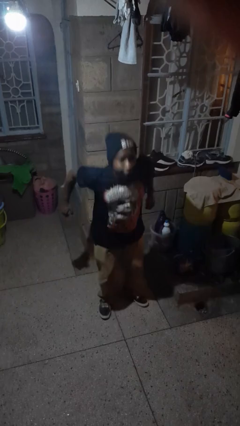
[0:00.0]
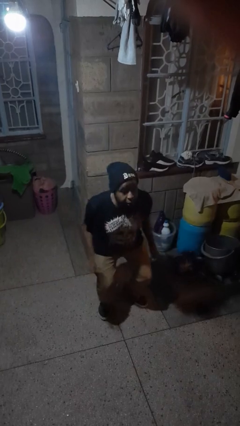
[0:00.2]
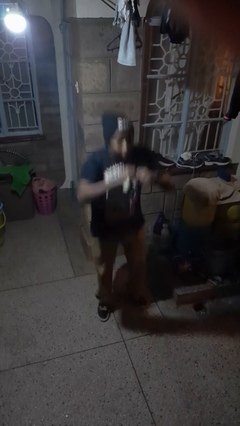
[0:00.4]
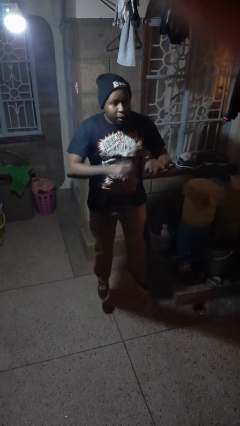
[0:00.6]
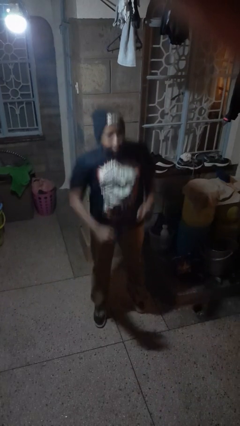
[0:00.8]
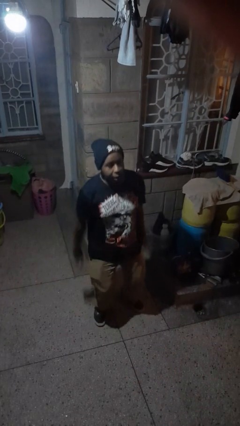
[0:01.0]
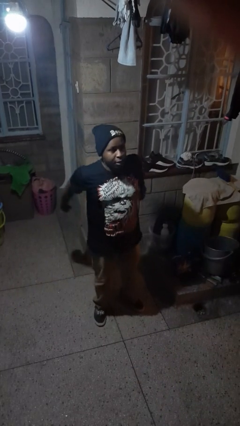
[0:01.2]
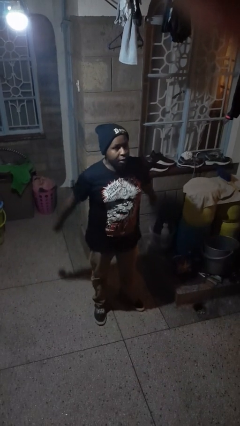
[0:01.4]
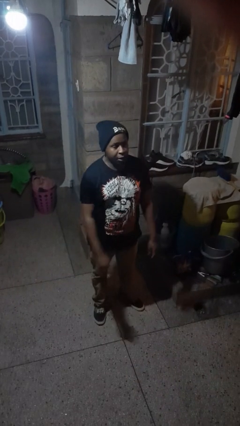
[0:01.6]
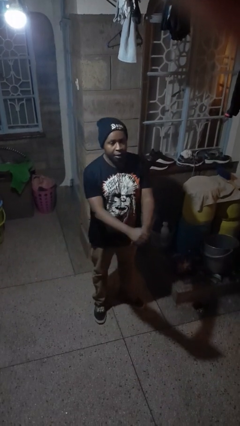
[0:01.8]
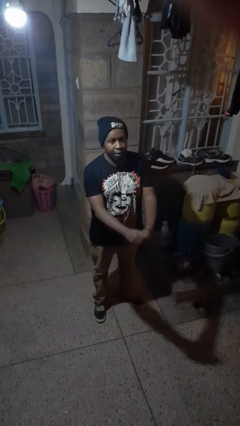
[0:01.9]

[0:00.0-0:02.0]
person jumps

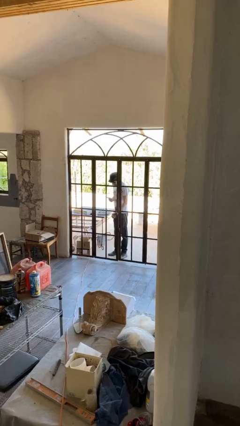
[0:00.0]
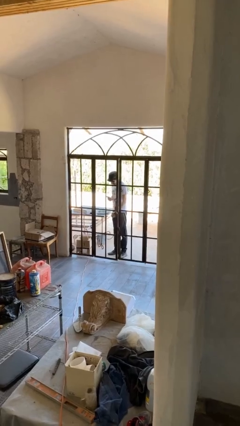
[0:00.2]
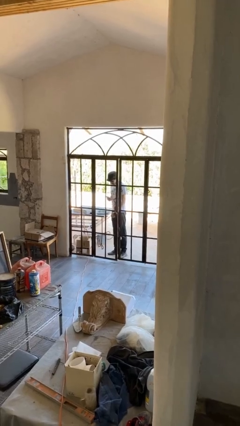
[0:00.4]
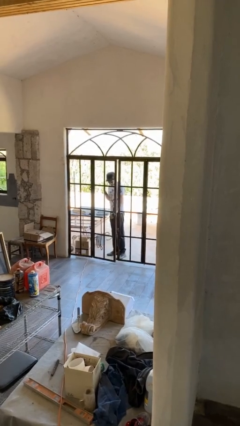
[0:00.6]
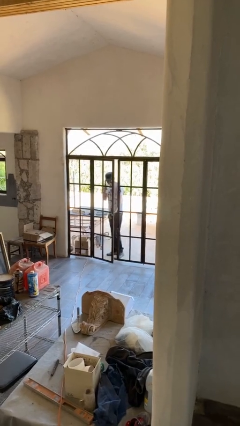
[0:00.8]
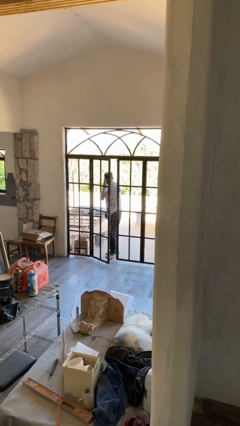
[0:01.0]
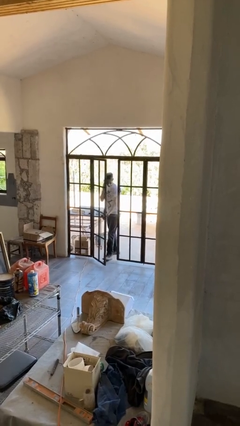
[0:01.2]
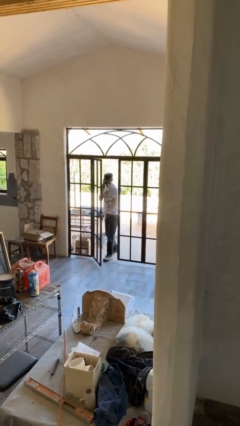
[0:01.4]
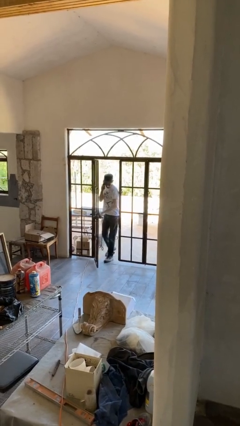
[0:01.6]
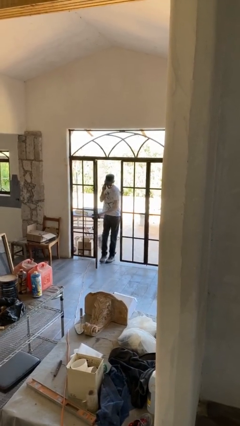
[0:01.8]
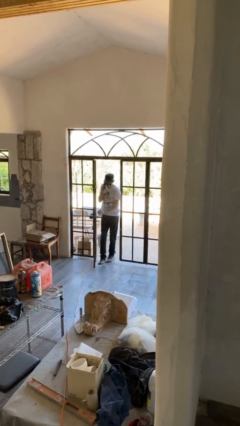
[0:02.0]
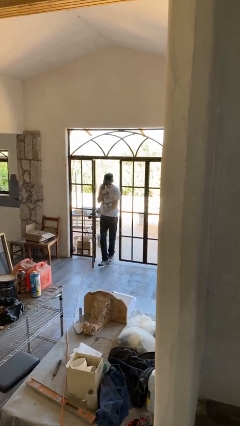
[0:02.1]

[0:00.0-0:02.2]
person opens facility door

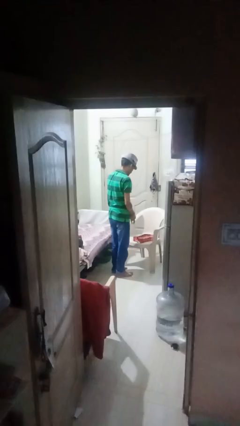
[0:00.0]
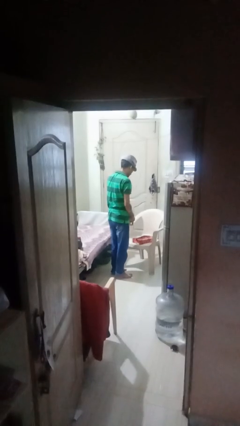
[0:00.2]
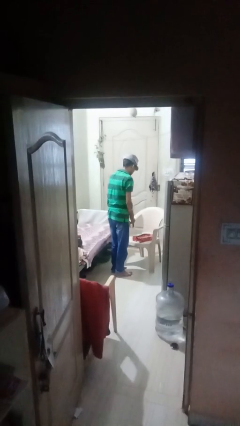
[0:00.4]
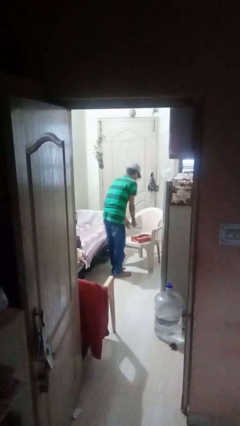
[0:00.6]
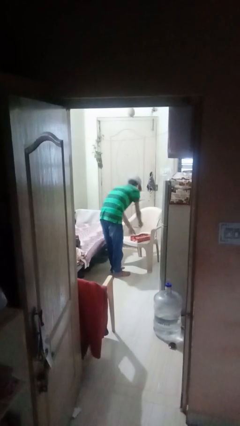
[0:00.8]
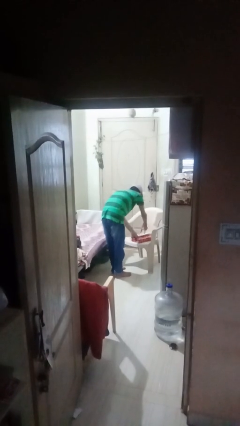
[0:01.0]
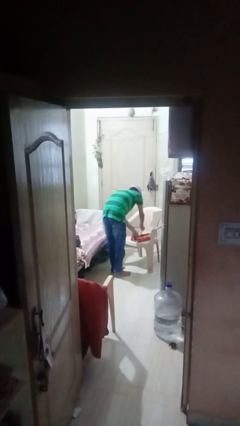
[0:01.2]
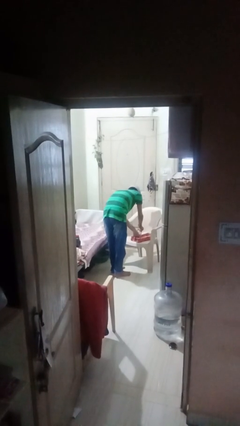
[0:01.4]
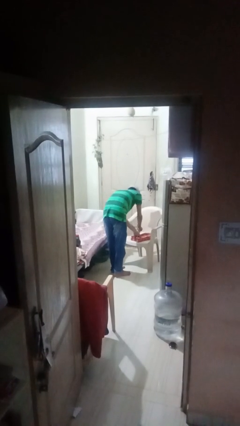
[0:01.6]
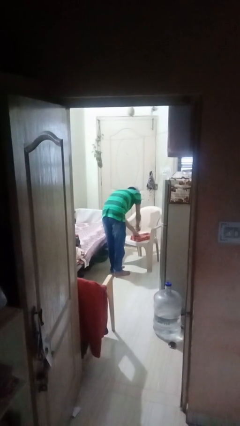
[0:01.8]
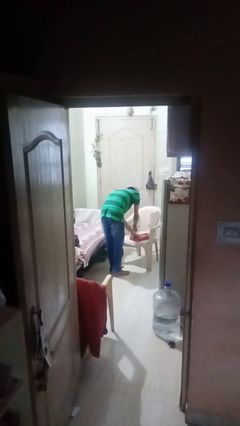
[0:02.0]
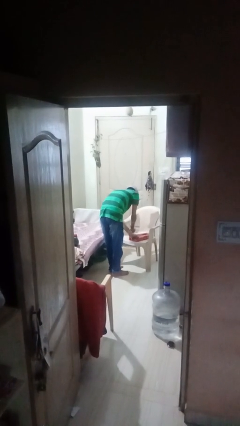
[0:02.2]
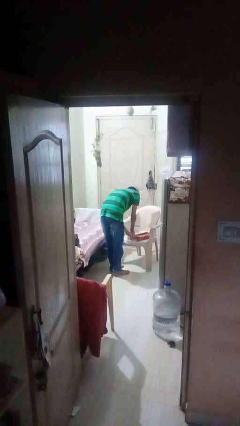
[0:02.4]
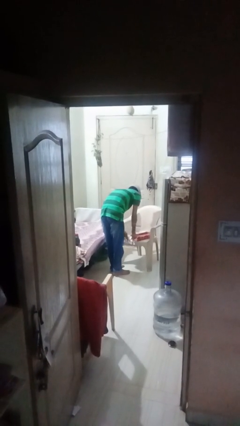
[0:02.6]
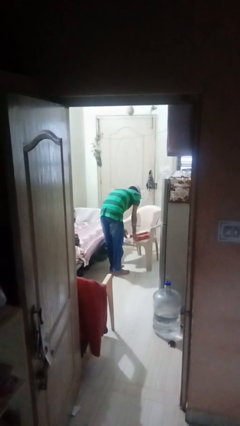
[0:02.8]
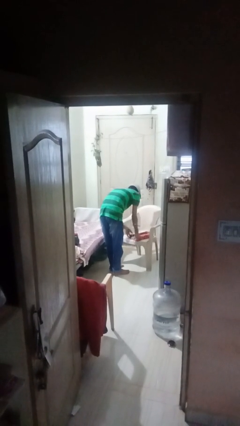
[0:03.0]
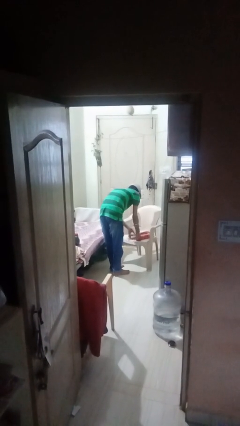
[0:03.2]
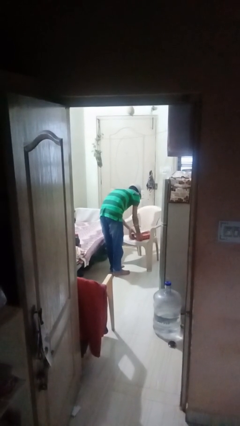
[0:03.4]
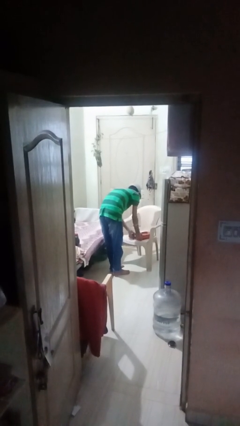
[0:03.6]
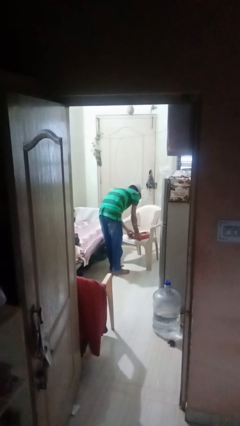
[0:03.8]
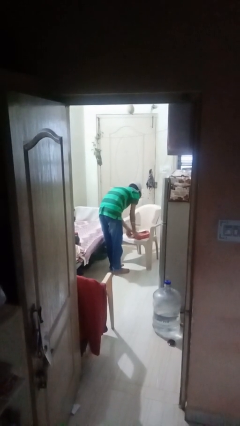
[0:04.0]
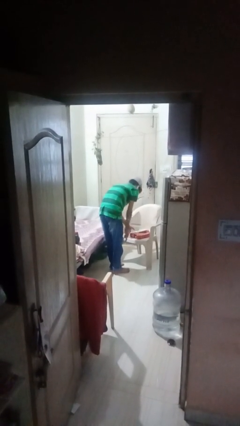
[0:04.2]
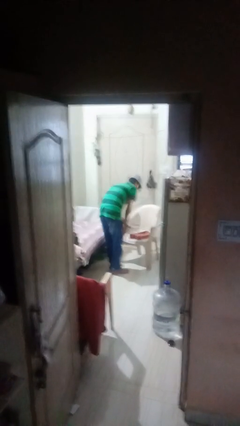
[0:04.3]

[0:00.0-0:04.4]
person wraps box

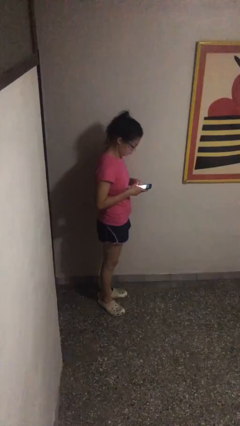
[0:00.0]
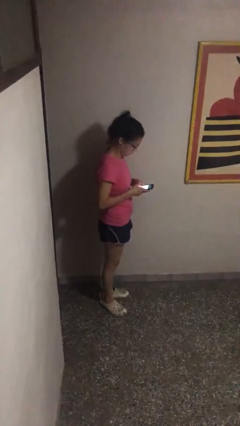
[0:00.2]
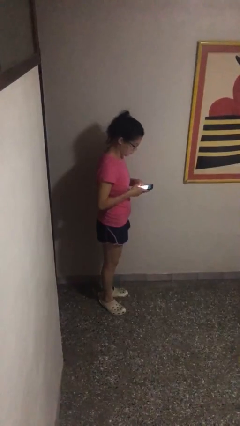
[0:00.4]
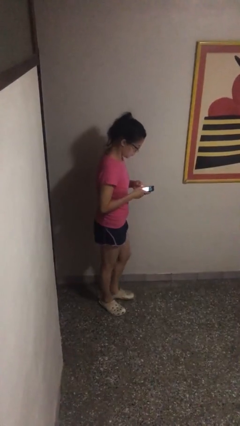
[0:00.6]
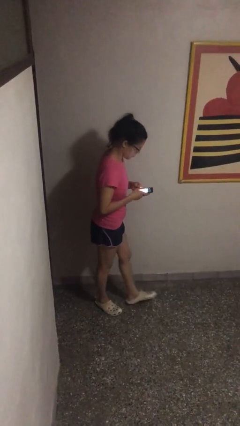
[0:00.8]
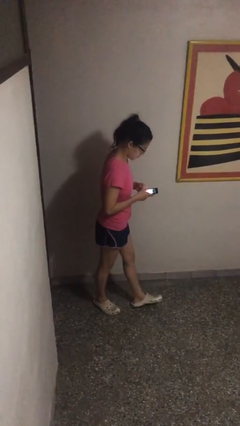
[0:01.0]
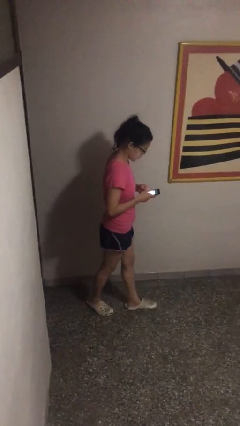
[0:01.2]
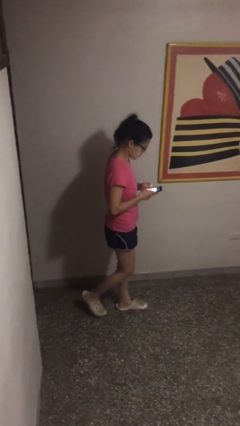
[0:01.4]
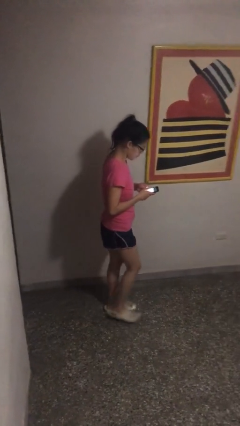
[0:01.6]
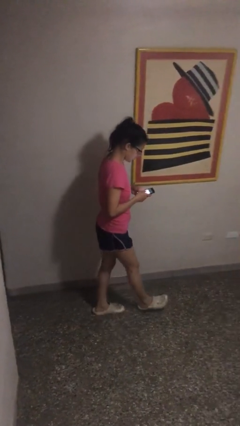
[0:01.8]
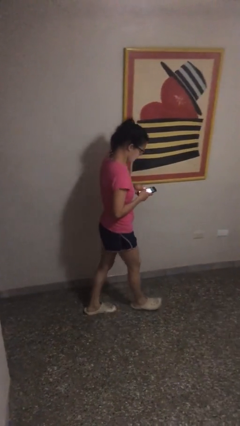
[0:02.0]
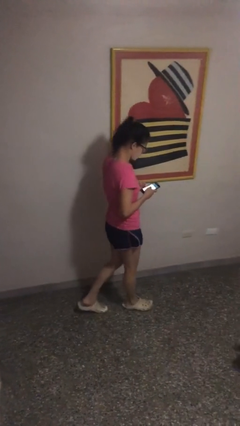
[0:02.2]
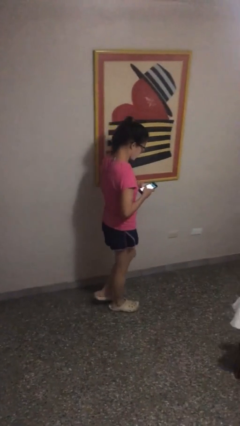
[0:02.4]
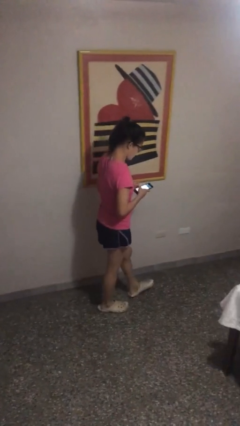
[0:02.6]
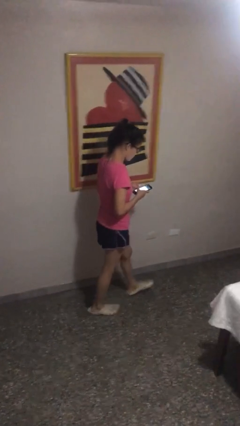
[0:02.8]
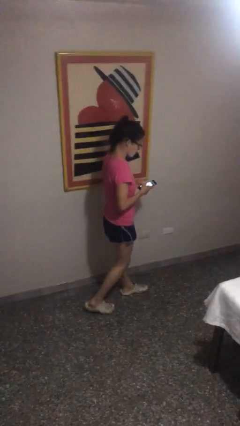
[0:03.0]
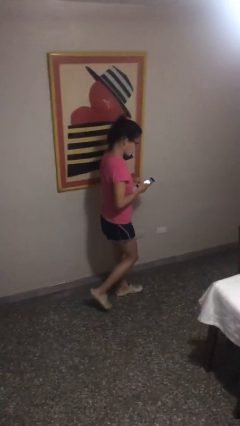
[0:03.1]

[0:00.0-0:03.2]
person texts on phone

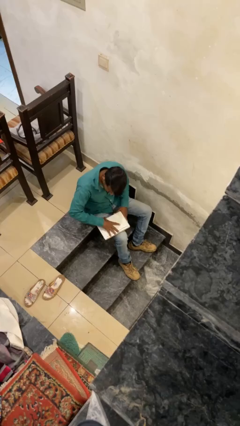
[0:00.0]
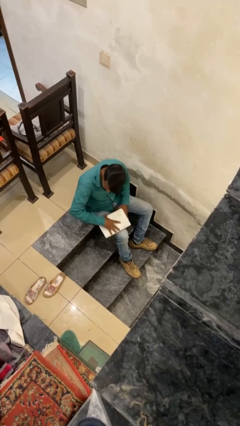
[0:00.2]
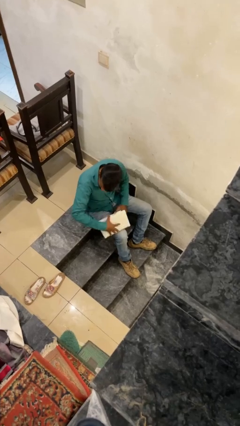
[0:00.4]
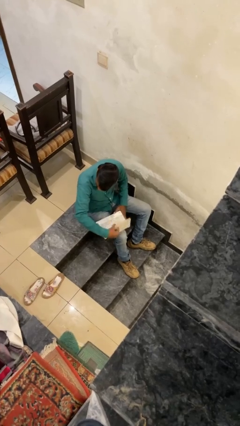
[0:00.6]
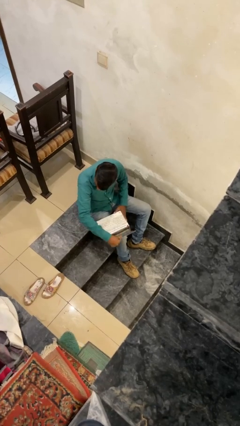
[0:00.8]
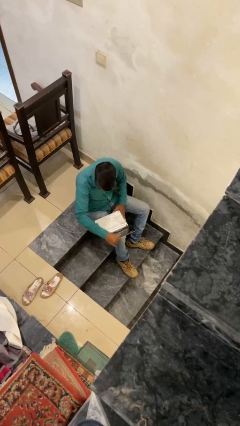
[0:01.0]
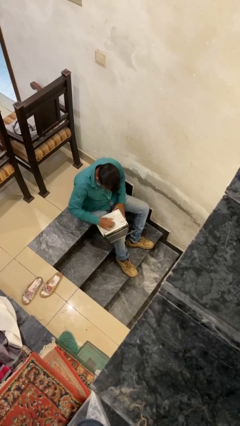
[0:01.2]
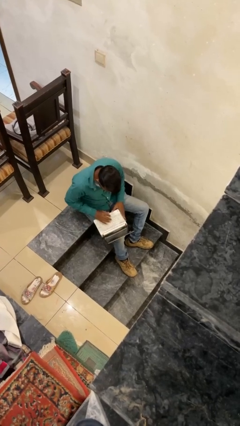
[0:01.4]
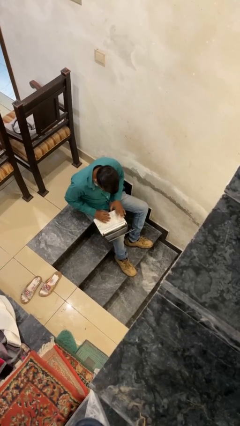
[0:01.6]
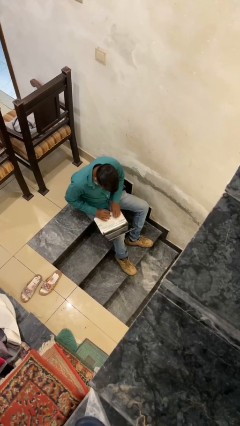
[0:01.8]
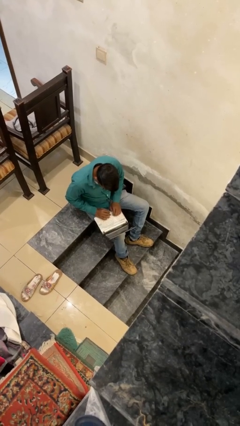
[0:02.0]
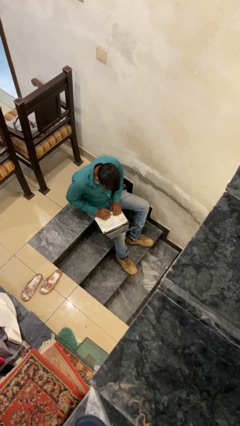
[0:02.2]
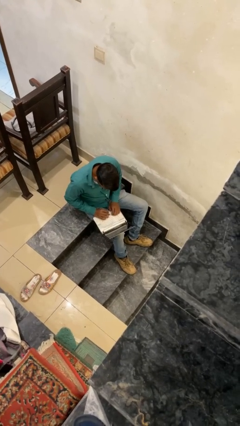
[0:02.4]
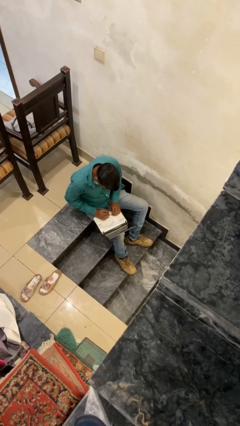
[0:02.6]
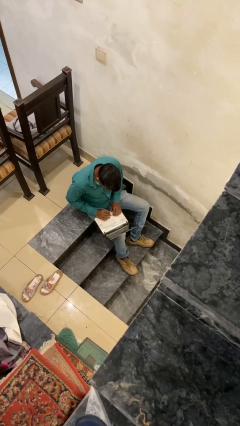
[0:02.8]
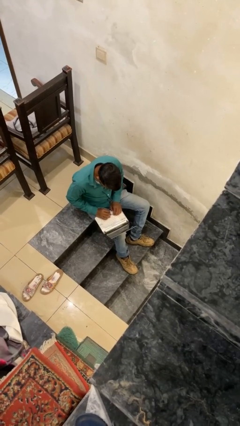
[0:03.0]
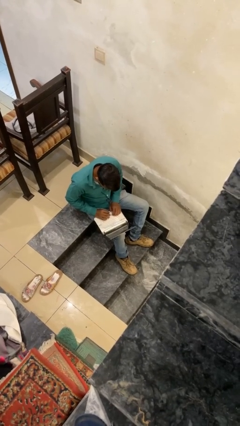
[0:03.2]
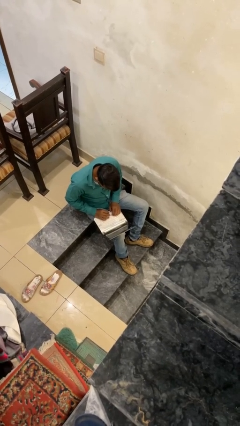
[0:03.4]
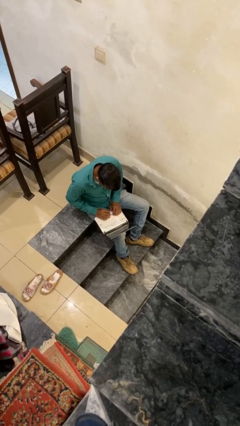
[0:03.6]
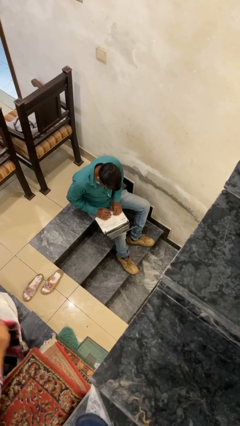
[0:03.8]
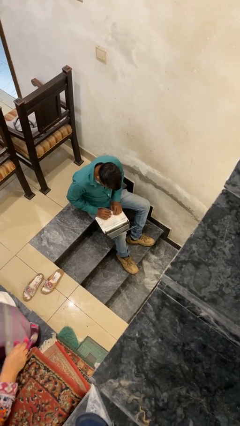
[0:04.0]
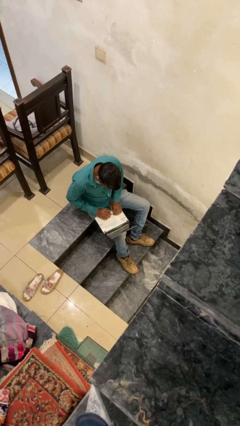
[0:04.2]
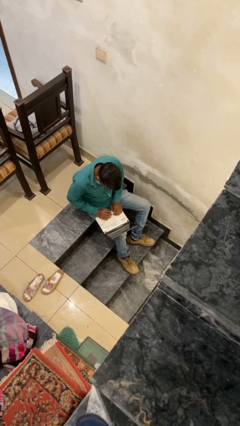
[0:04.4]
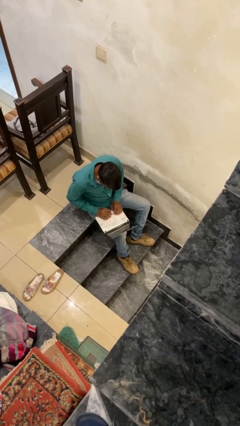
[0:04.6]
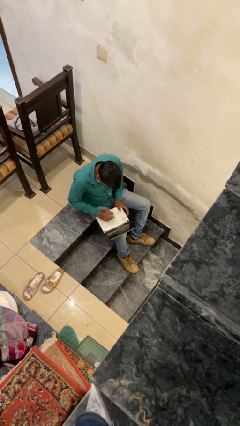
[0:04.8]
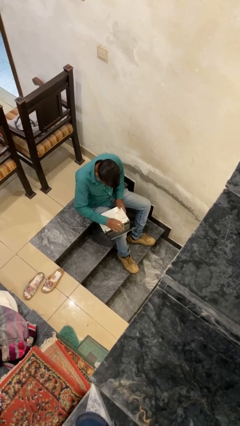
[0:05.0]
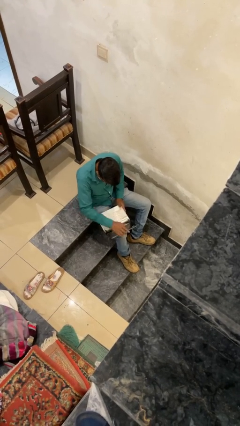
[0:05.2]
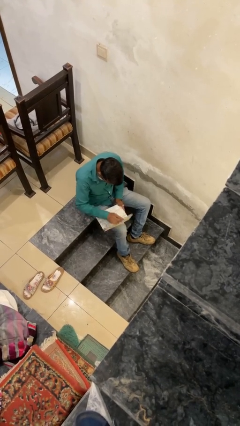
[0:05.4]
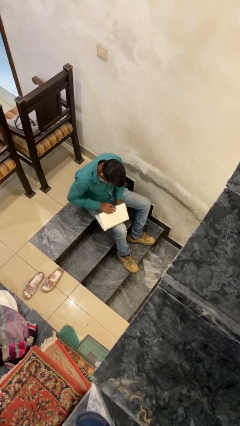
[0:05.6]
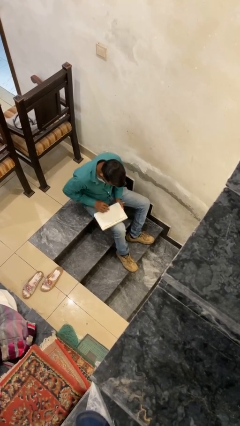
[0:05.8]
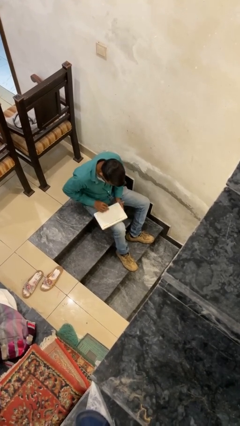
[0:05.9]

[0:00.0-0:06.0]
person interacts with laptop
